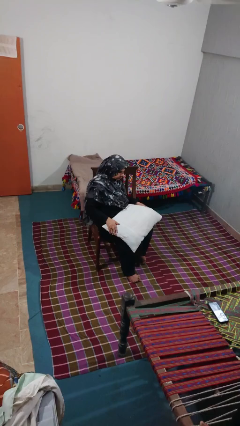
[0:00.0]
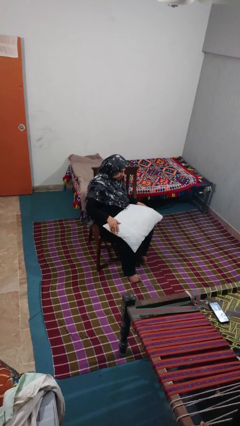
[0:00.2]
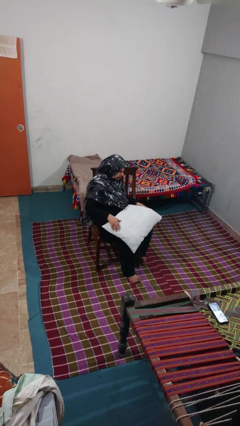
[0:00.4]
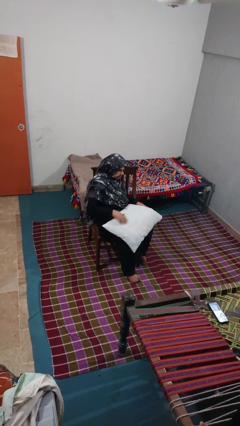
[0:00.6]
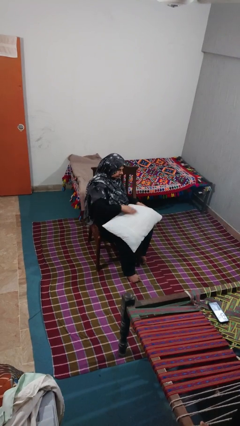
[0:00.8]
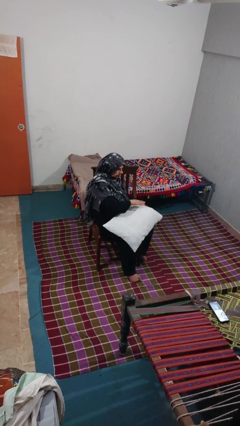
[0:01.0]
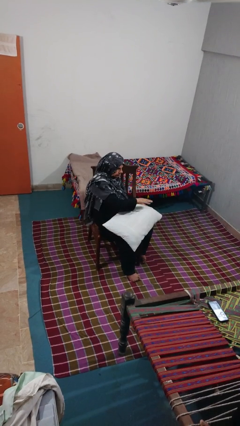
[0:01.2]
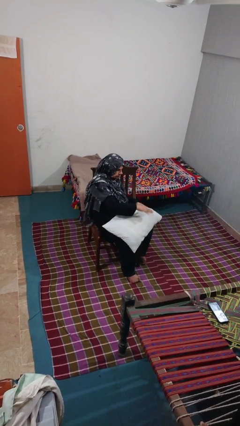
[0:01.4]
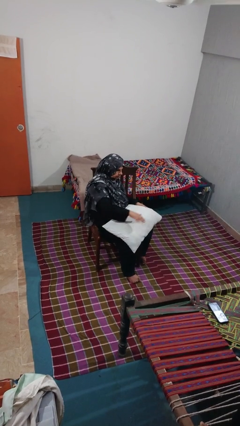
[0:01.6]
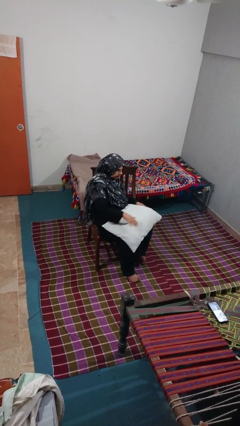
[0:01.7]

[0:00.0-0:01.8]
person waves hand over object

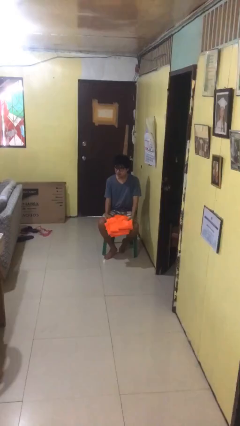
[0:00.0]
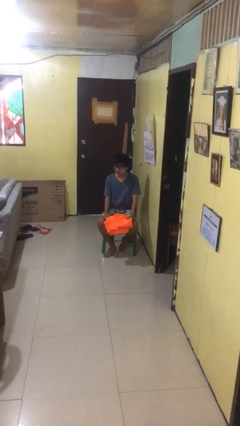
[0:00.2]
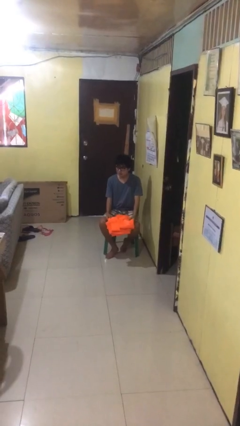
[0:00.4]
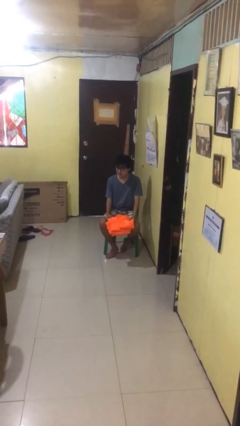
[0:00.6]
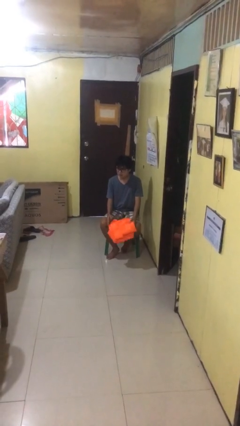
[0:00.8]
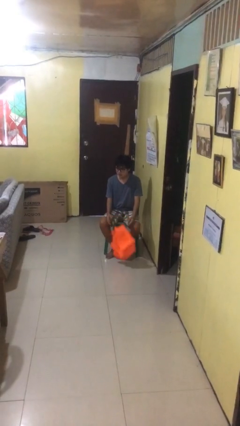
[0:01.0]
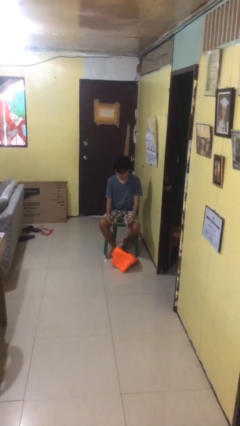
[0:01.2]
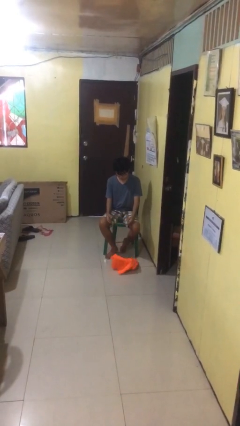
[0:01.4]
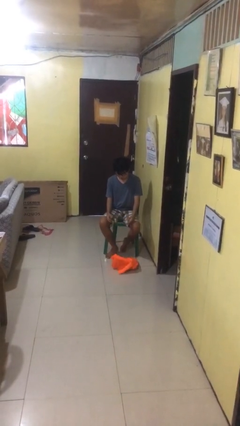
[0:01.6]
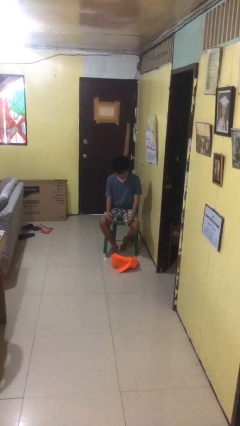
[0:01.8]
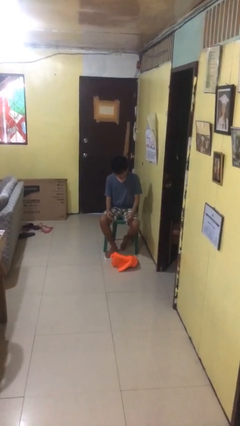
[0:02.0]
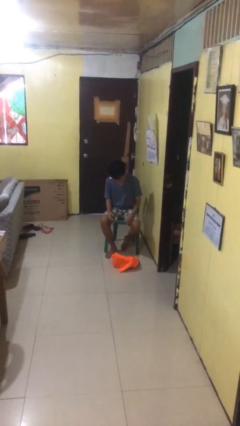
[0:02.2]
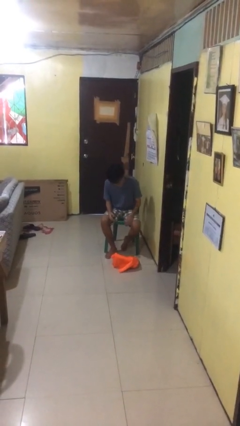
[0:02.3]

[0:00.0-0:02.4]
person drops object

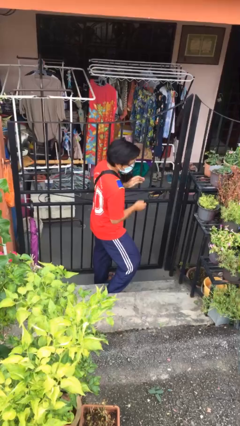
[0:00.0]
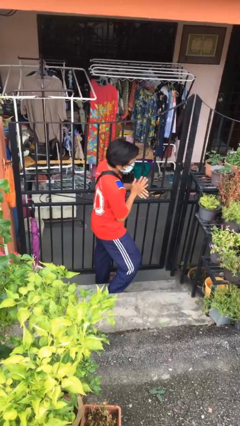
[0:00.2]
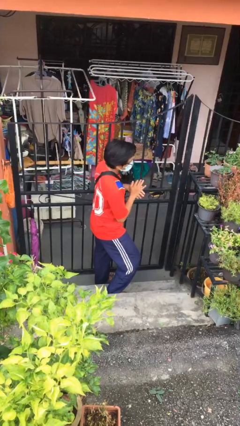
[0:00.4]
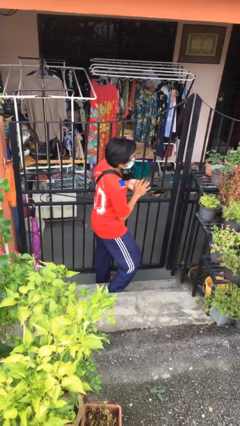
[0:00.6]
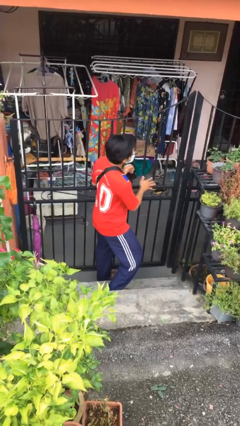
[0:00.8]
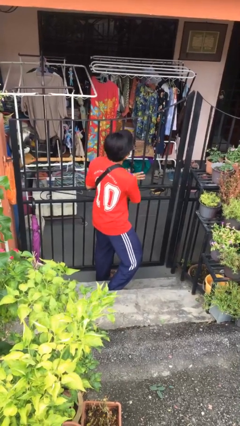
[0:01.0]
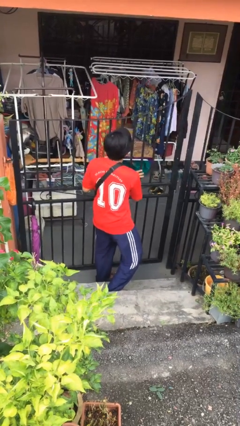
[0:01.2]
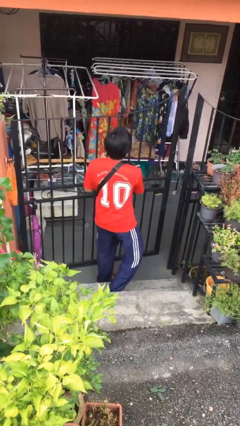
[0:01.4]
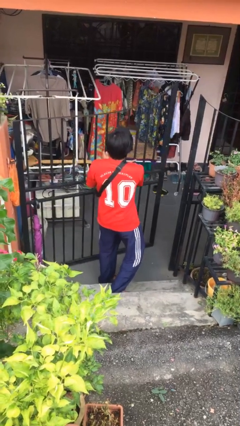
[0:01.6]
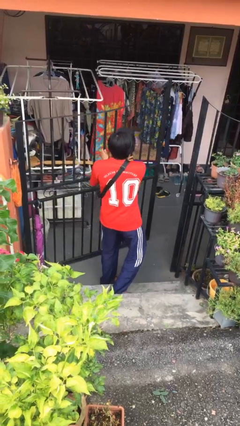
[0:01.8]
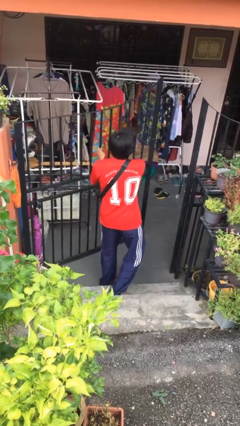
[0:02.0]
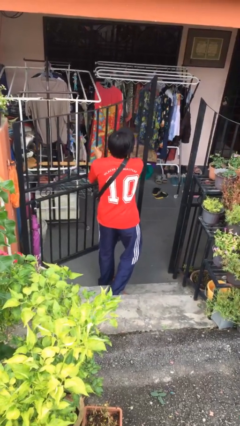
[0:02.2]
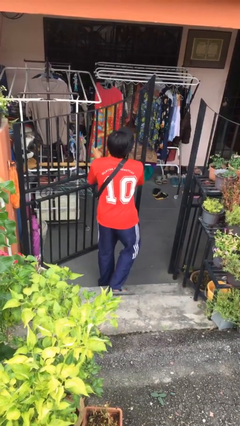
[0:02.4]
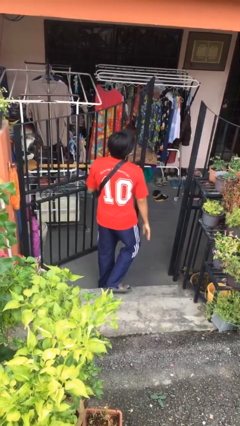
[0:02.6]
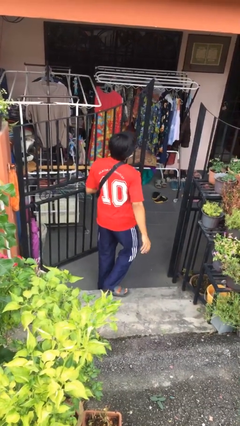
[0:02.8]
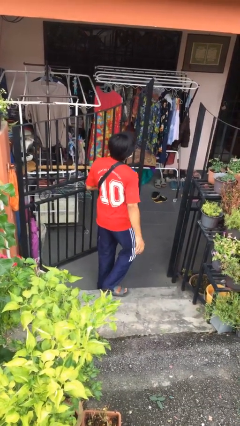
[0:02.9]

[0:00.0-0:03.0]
person opens facility door

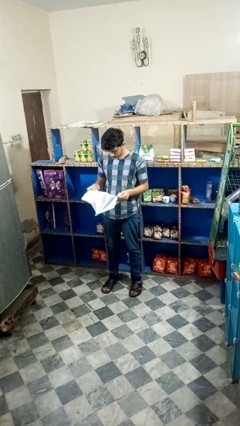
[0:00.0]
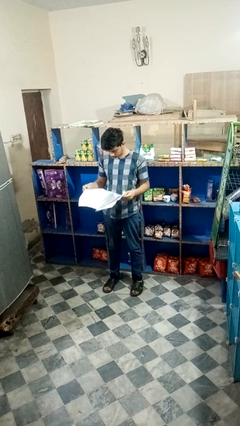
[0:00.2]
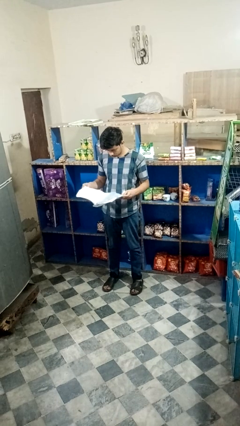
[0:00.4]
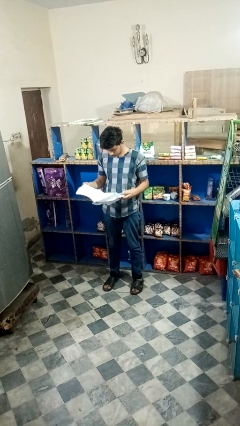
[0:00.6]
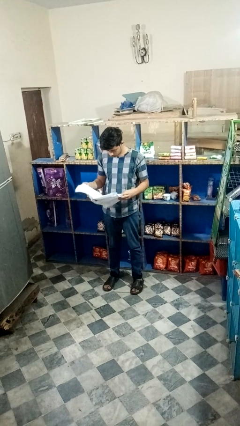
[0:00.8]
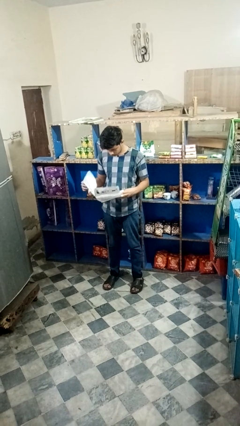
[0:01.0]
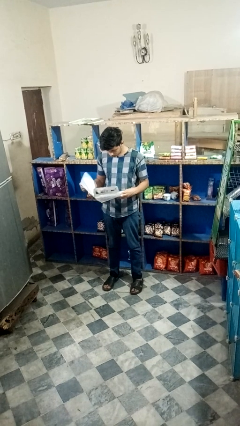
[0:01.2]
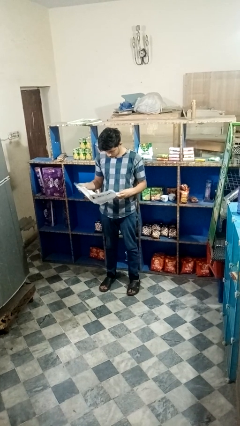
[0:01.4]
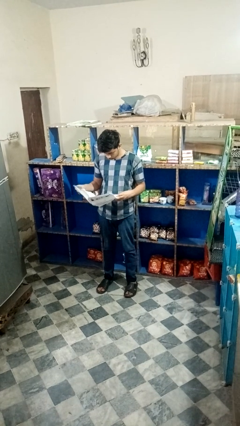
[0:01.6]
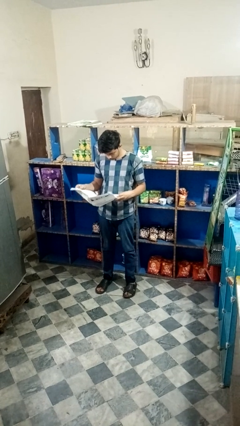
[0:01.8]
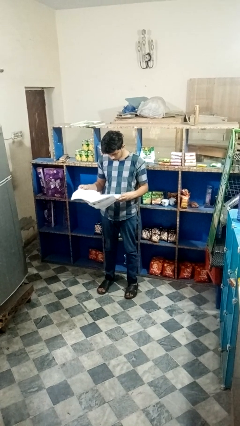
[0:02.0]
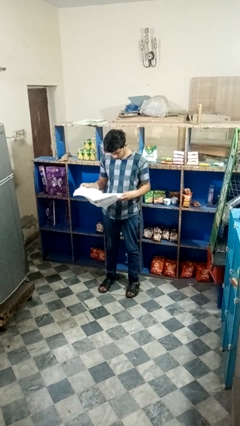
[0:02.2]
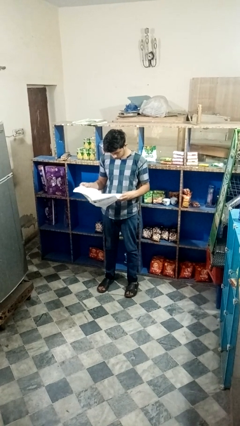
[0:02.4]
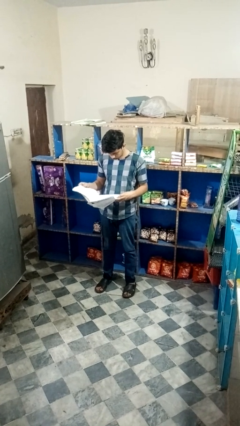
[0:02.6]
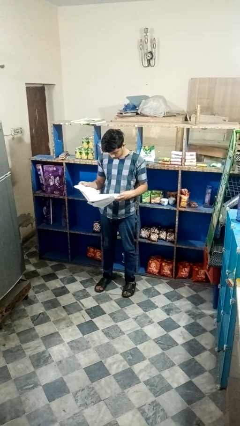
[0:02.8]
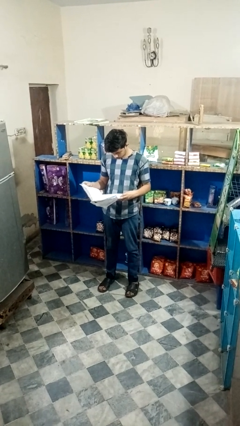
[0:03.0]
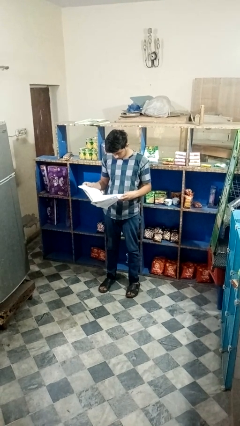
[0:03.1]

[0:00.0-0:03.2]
person reads newspaper

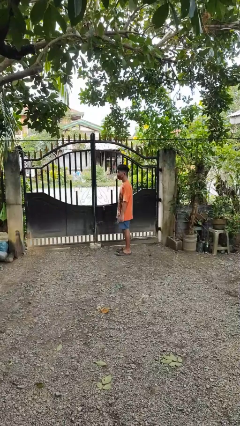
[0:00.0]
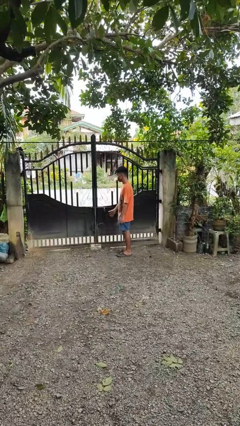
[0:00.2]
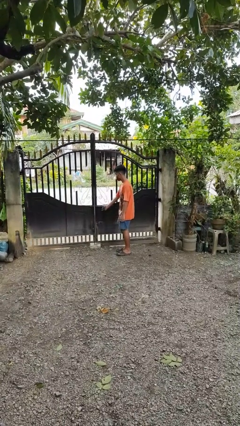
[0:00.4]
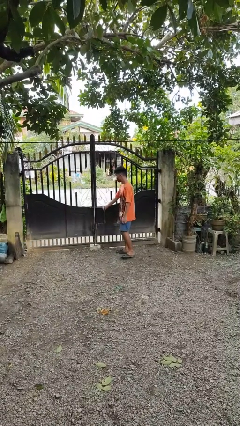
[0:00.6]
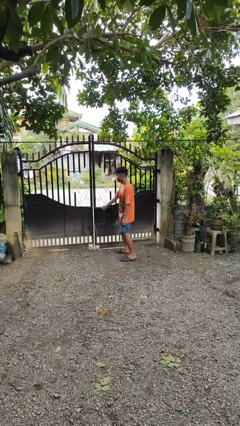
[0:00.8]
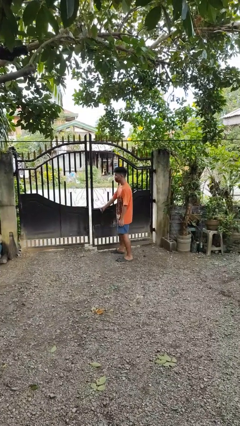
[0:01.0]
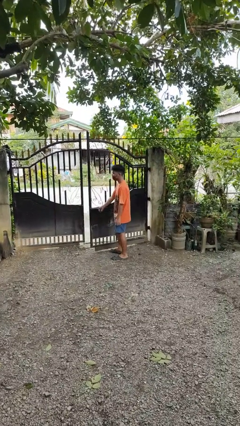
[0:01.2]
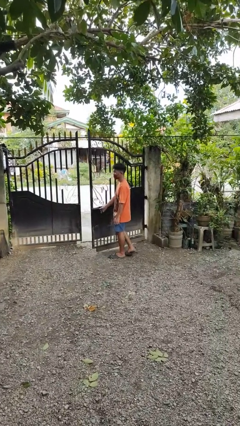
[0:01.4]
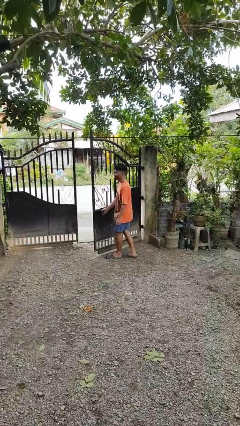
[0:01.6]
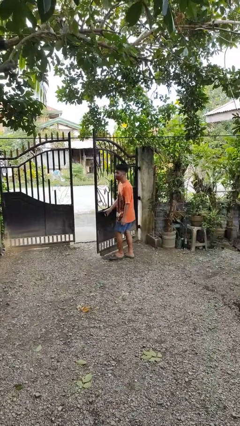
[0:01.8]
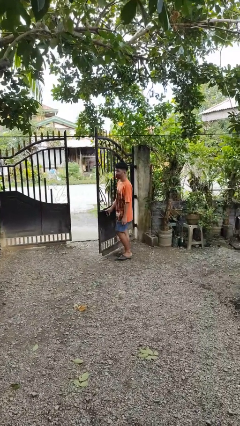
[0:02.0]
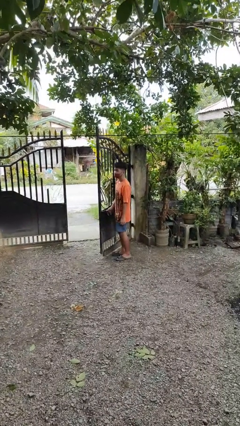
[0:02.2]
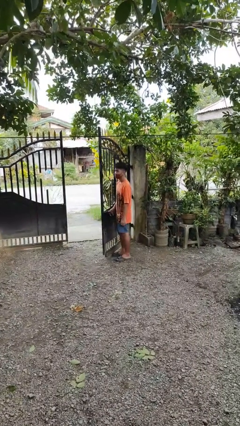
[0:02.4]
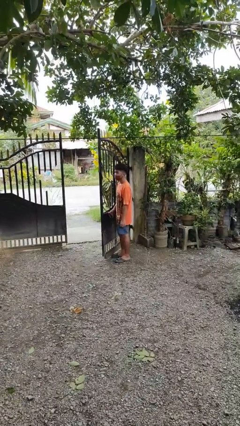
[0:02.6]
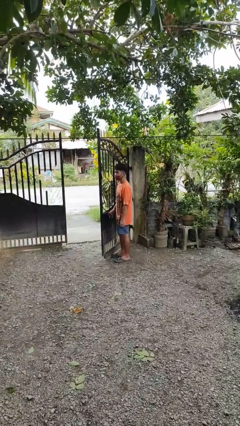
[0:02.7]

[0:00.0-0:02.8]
person opens gate

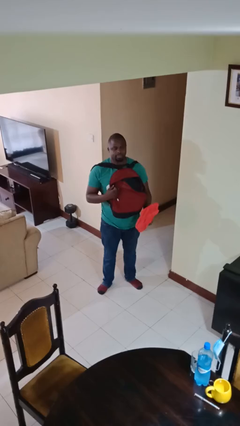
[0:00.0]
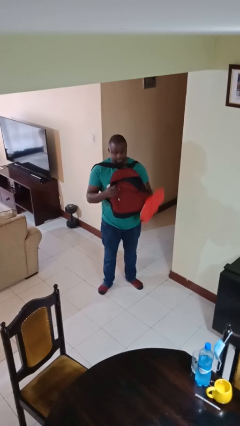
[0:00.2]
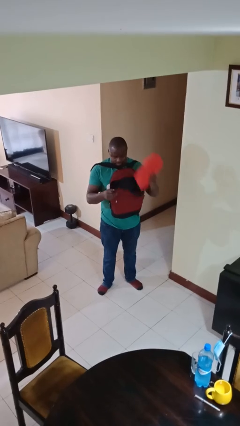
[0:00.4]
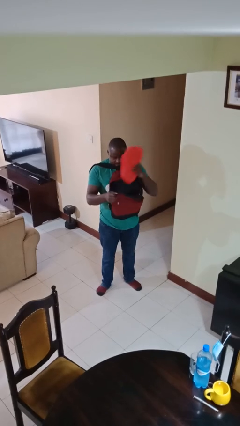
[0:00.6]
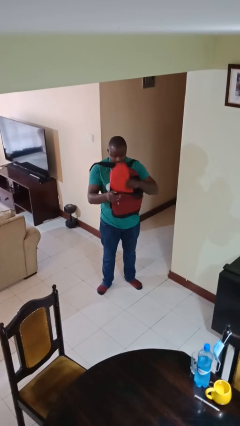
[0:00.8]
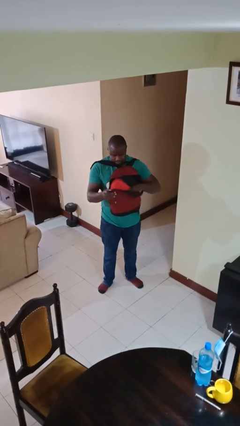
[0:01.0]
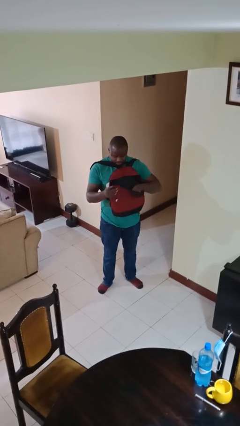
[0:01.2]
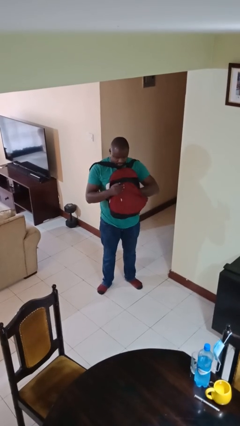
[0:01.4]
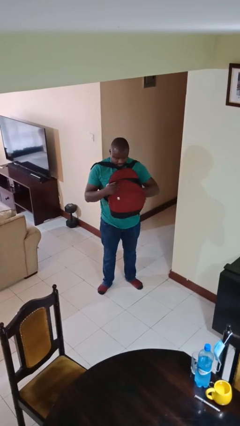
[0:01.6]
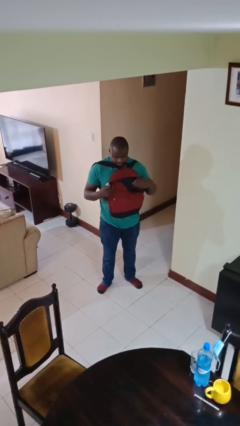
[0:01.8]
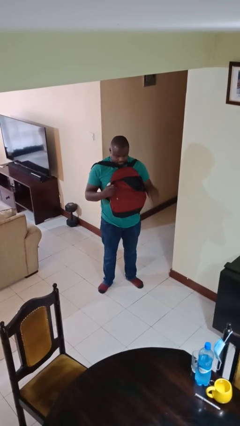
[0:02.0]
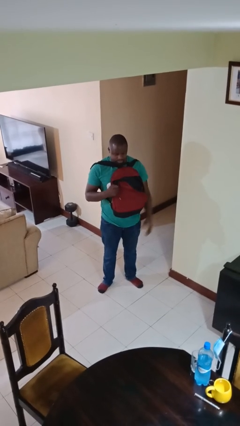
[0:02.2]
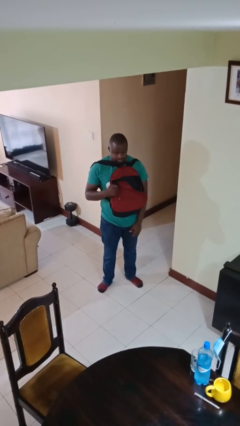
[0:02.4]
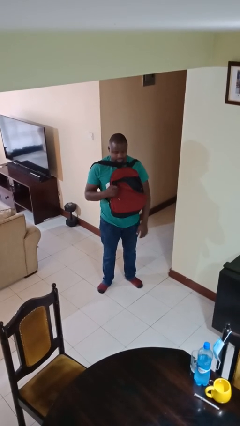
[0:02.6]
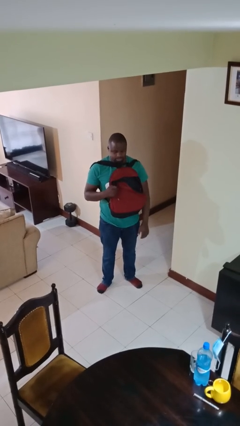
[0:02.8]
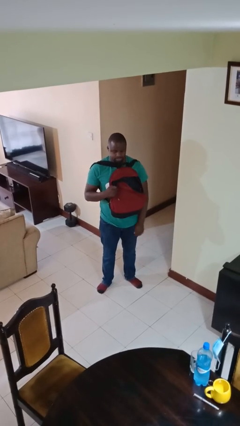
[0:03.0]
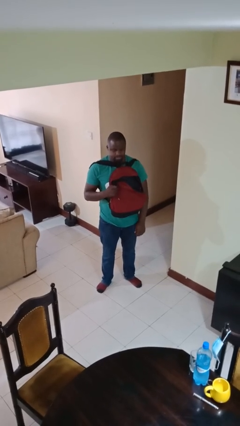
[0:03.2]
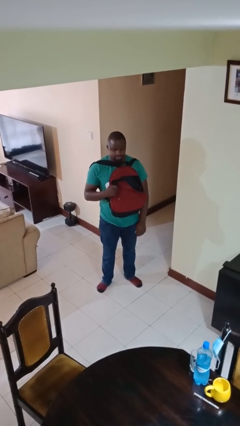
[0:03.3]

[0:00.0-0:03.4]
person puts object into backpack

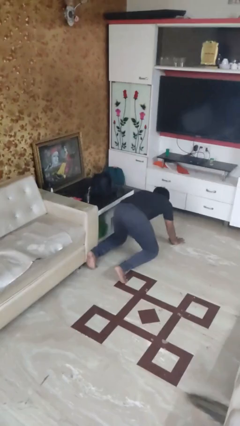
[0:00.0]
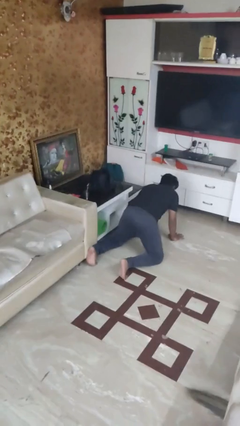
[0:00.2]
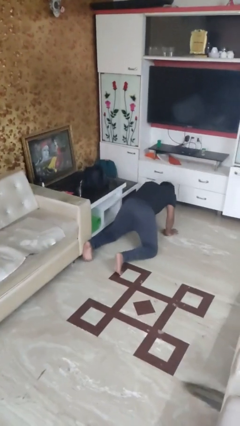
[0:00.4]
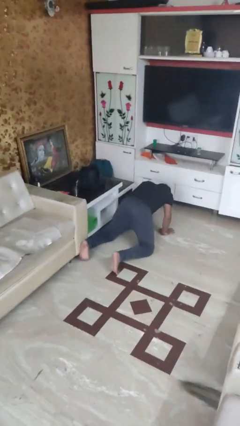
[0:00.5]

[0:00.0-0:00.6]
person lies down on floor

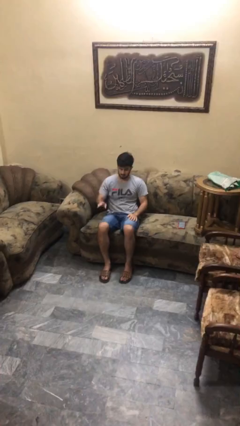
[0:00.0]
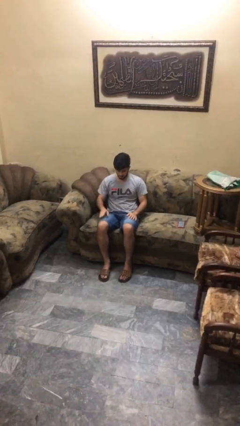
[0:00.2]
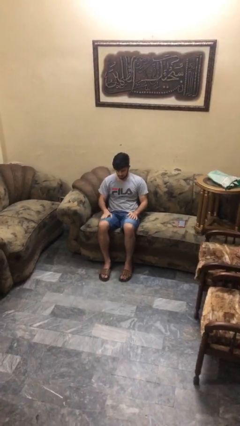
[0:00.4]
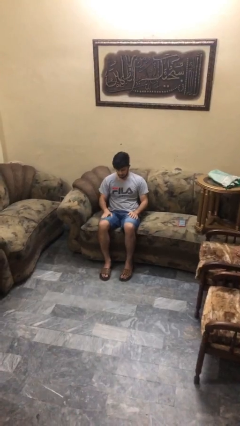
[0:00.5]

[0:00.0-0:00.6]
person gestures lower hand
